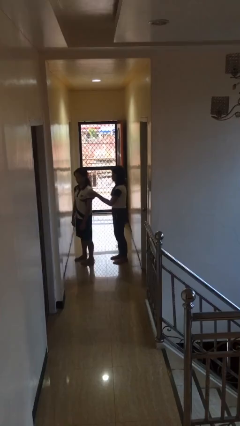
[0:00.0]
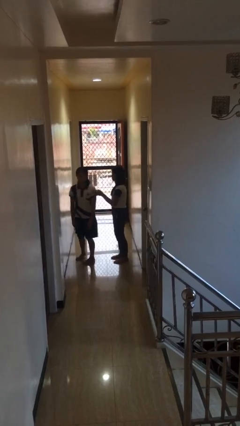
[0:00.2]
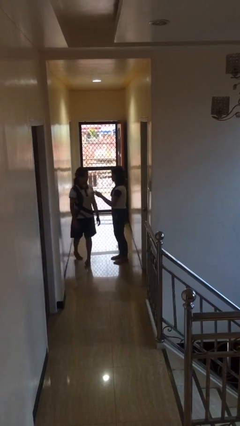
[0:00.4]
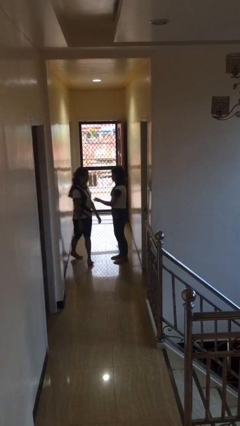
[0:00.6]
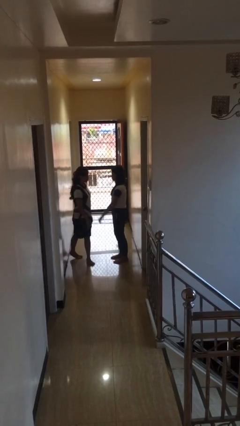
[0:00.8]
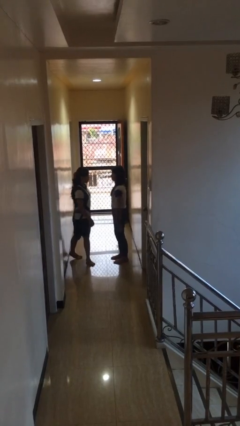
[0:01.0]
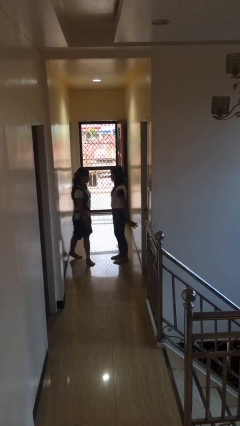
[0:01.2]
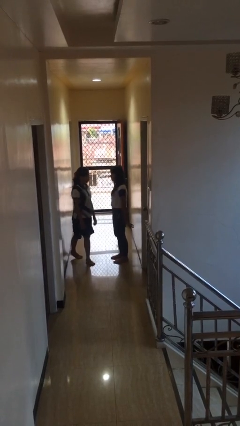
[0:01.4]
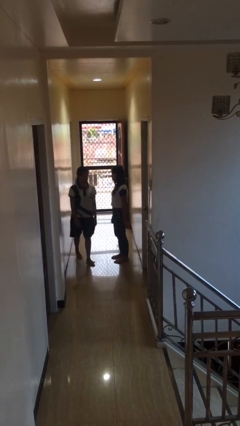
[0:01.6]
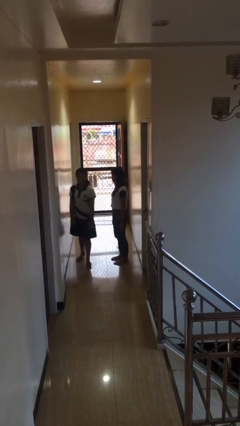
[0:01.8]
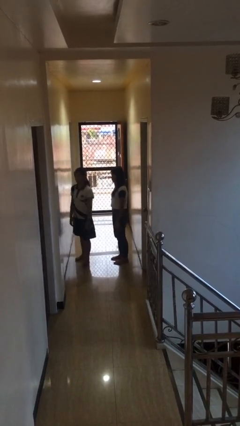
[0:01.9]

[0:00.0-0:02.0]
person spins person around

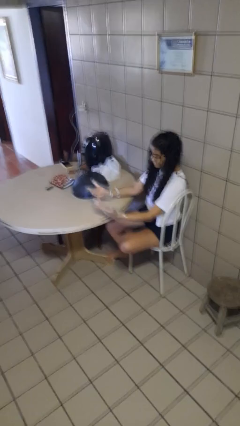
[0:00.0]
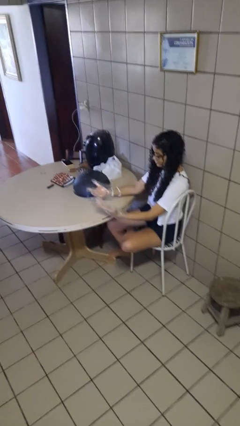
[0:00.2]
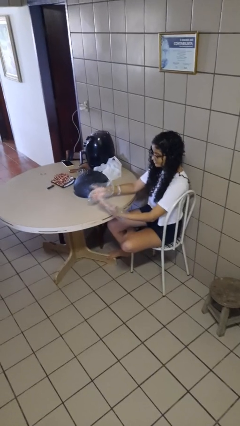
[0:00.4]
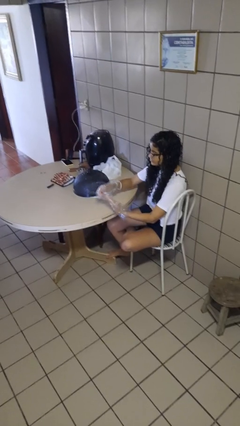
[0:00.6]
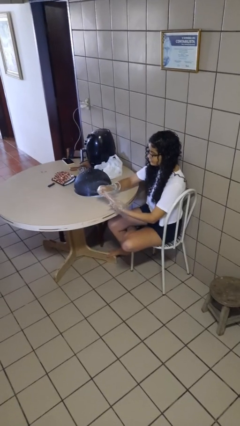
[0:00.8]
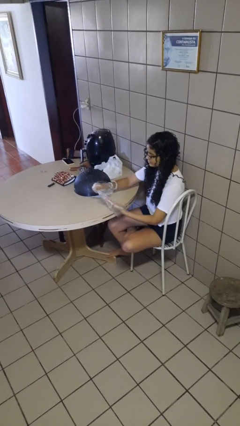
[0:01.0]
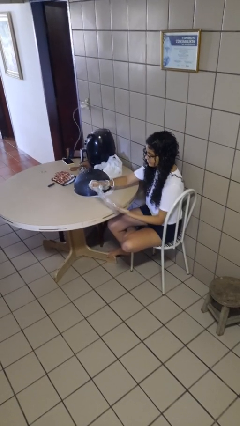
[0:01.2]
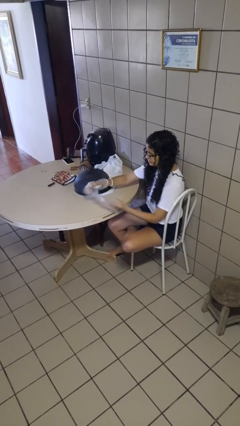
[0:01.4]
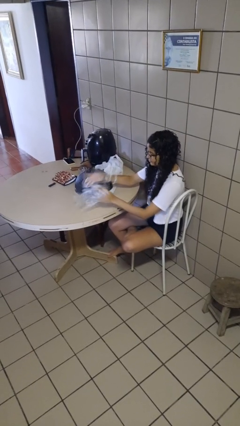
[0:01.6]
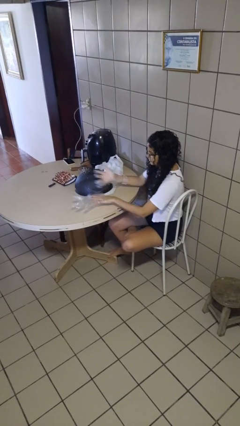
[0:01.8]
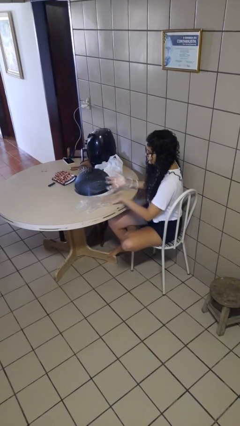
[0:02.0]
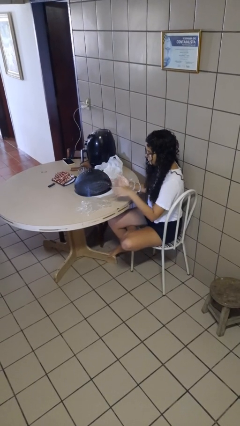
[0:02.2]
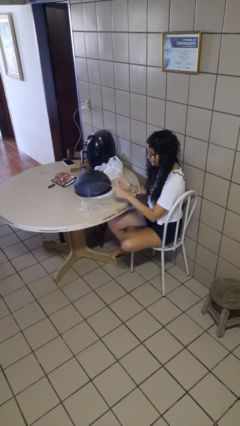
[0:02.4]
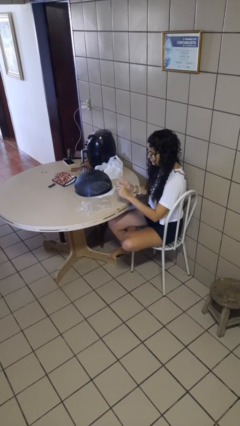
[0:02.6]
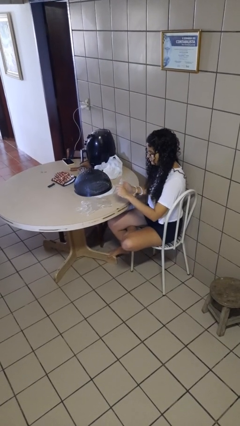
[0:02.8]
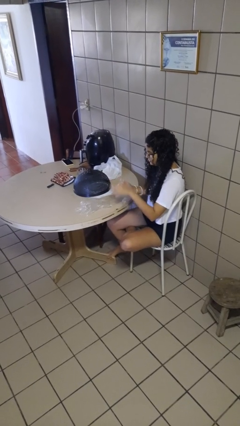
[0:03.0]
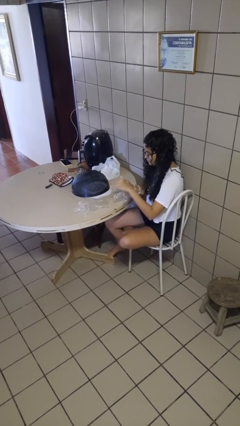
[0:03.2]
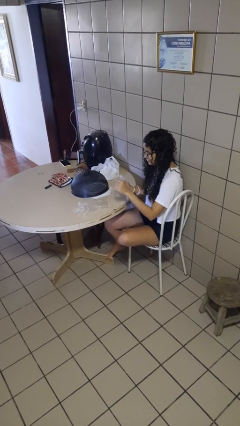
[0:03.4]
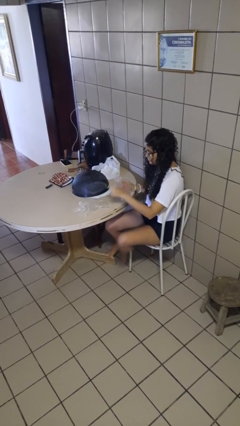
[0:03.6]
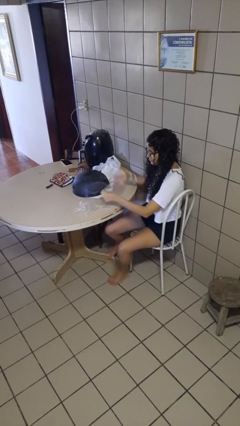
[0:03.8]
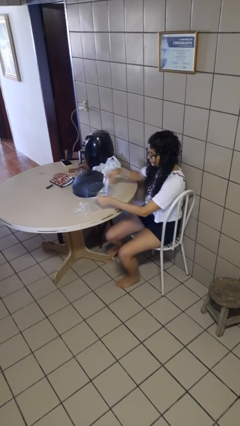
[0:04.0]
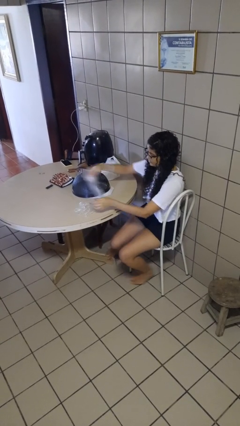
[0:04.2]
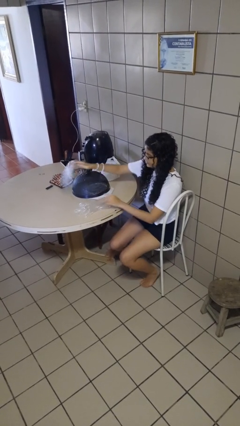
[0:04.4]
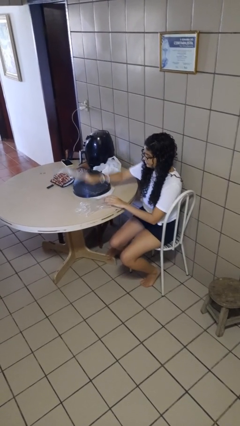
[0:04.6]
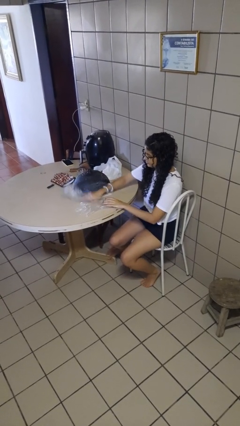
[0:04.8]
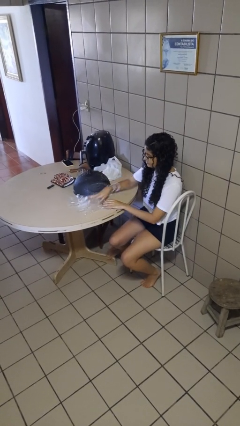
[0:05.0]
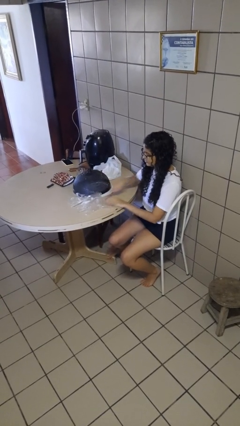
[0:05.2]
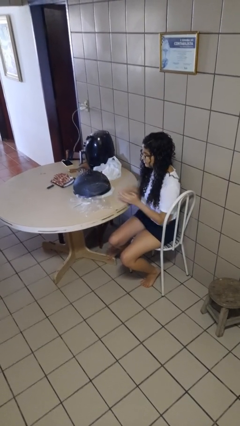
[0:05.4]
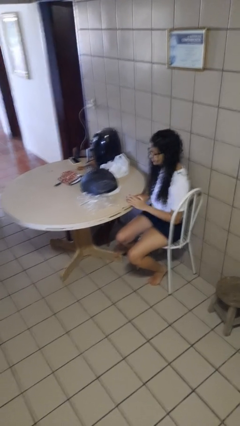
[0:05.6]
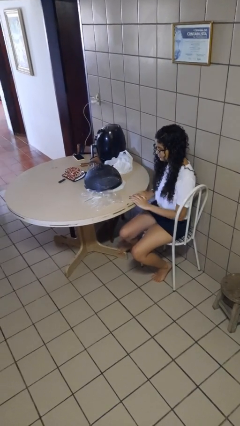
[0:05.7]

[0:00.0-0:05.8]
person takes off gloves

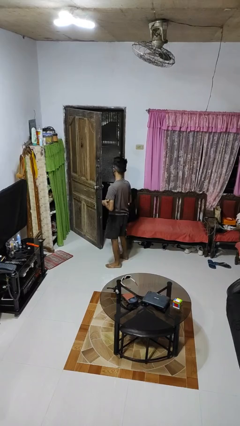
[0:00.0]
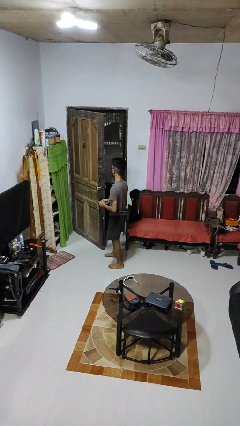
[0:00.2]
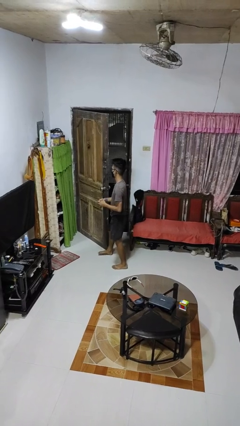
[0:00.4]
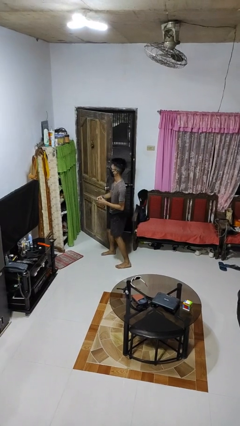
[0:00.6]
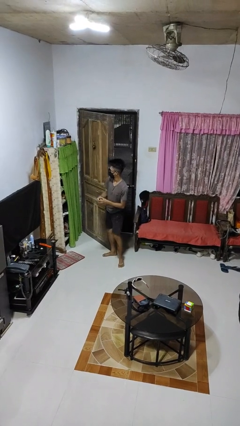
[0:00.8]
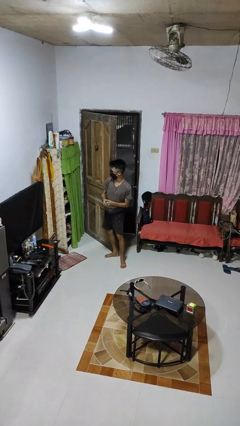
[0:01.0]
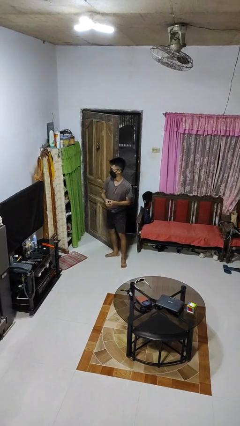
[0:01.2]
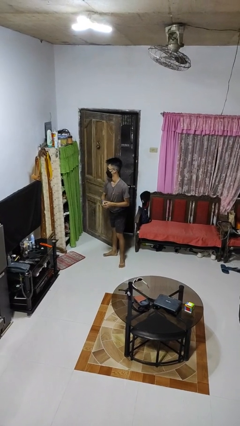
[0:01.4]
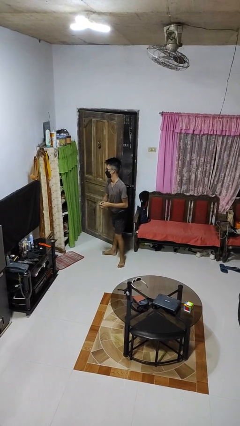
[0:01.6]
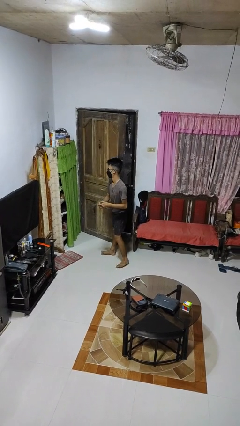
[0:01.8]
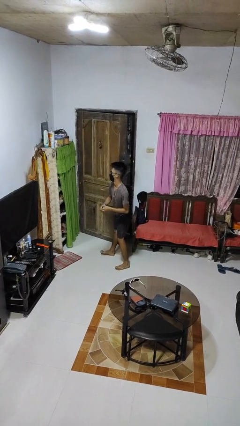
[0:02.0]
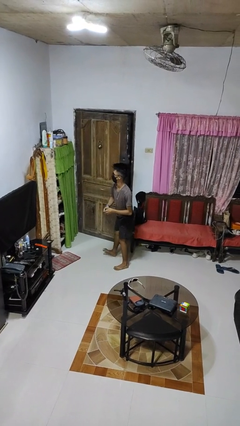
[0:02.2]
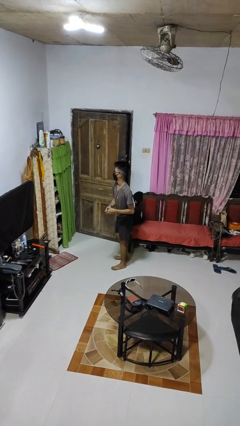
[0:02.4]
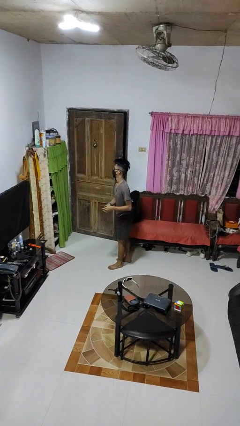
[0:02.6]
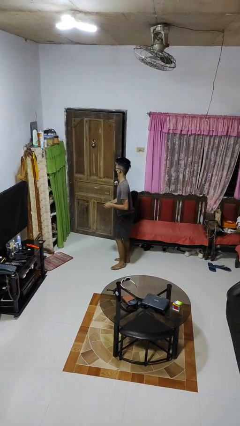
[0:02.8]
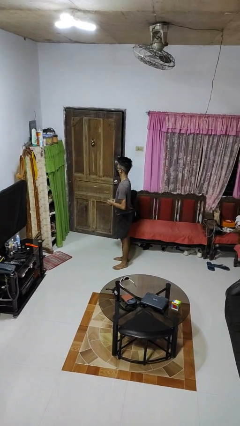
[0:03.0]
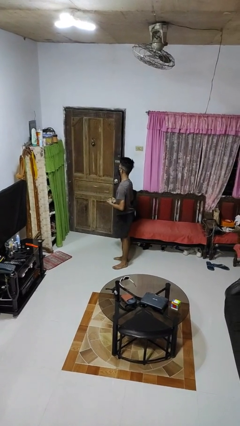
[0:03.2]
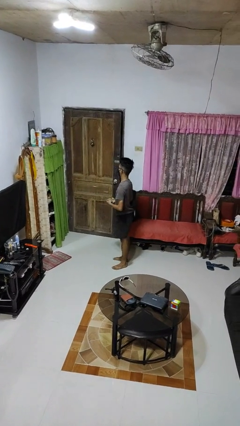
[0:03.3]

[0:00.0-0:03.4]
person closes door with hip

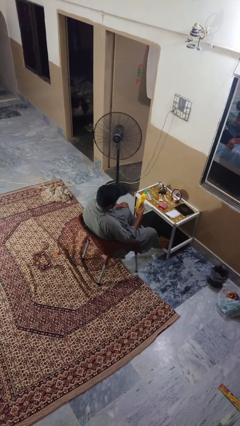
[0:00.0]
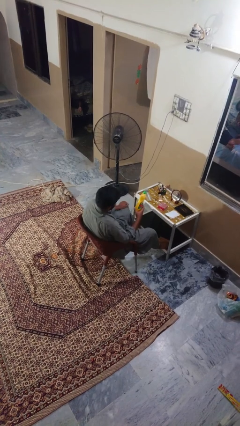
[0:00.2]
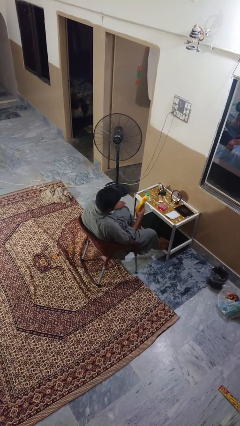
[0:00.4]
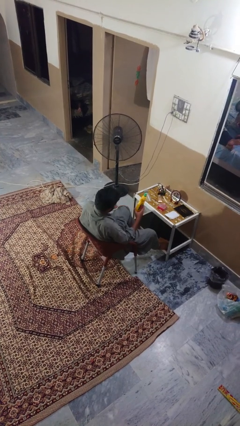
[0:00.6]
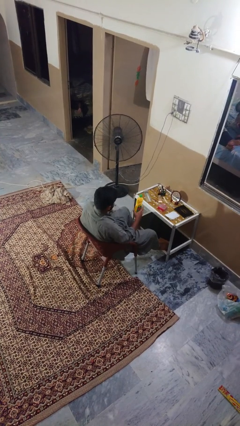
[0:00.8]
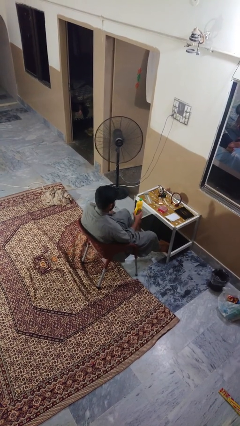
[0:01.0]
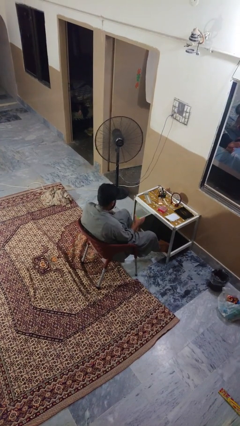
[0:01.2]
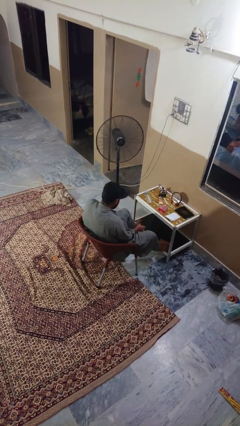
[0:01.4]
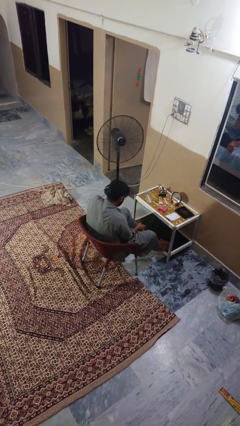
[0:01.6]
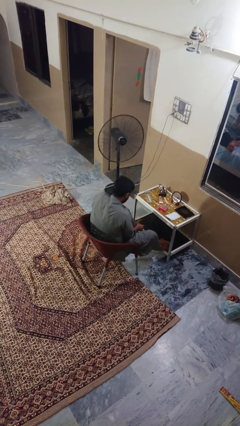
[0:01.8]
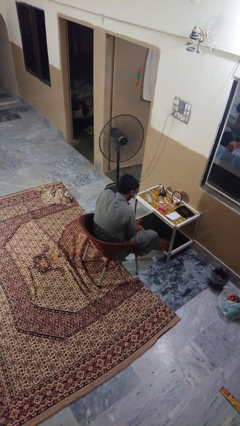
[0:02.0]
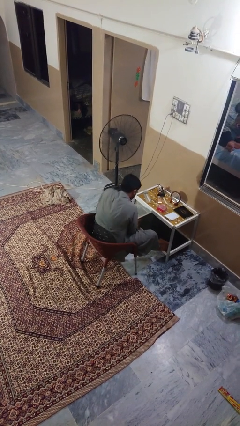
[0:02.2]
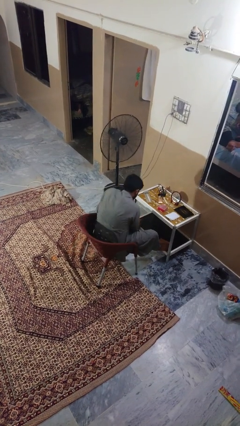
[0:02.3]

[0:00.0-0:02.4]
person throws object to ground

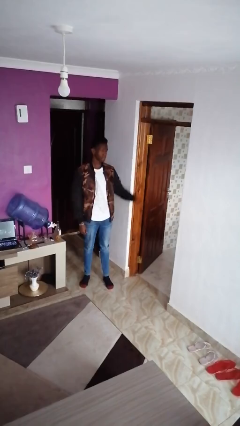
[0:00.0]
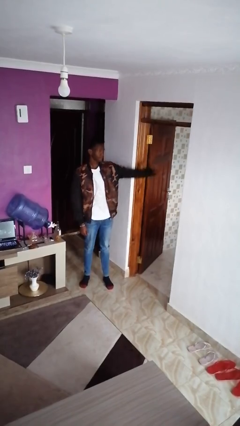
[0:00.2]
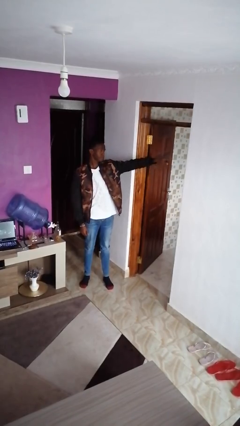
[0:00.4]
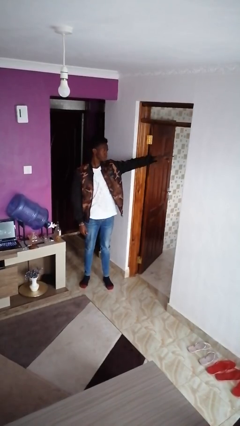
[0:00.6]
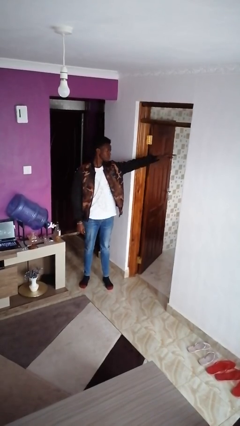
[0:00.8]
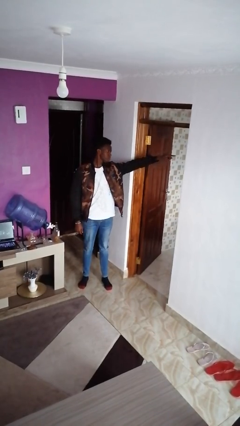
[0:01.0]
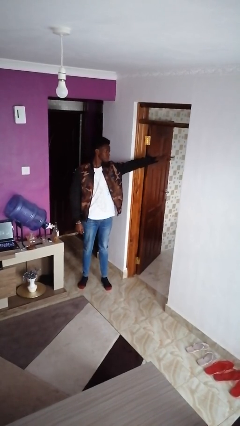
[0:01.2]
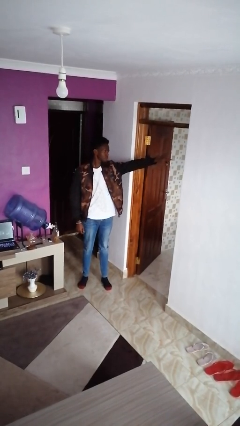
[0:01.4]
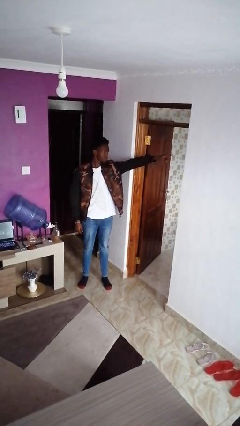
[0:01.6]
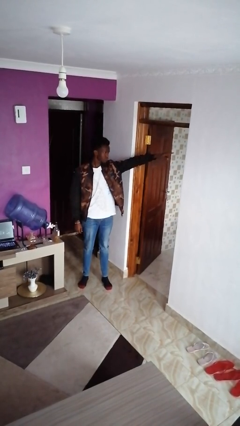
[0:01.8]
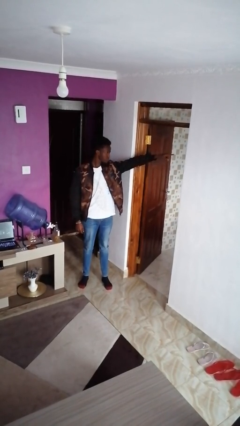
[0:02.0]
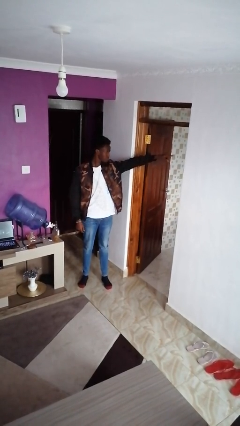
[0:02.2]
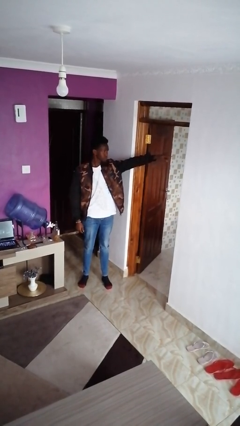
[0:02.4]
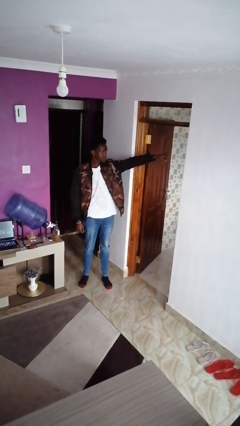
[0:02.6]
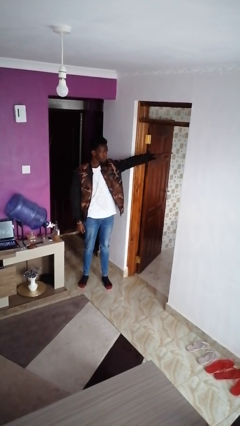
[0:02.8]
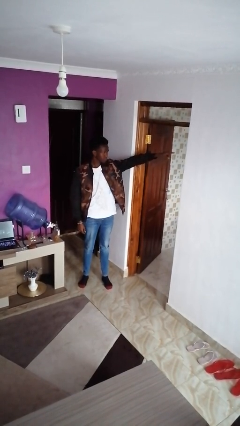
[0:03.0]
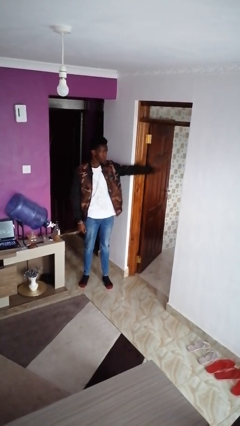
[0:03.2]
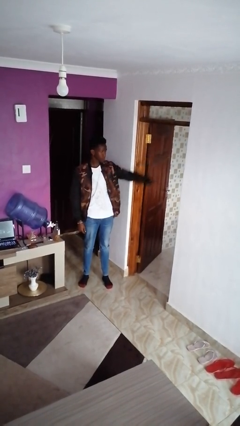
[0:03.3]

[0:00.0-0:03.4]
person points at person

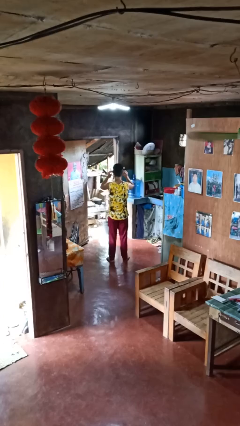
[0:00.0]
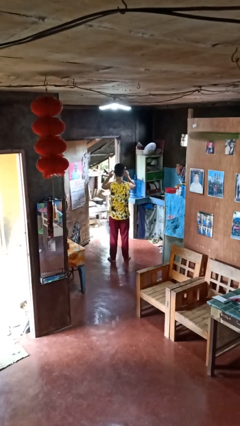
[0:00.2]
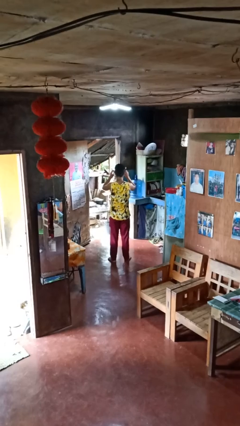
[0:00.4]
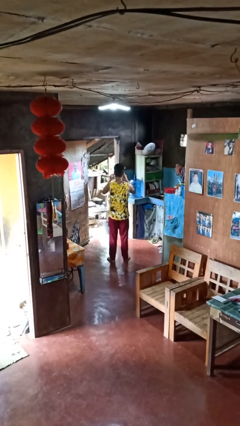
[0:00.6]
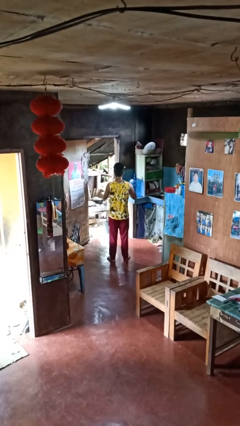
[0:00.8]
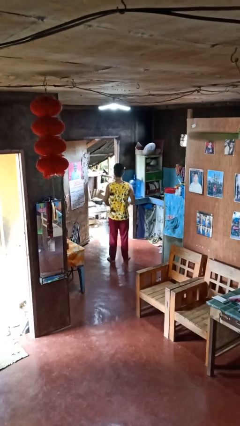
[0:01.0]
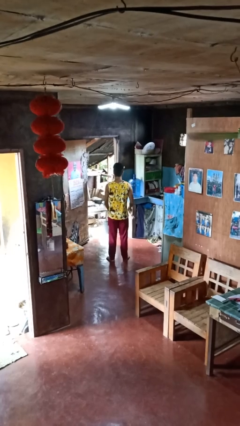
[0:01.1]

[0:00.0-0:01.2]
person takes off glasses
